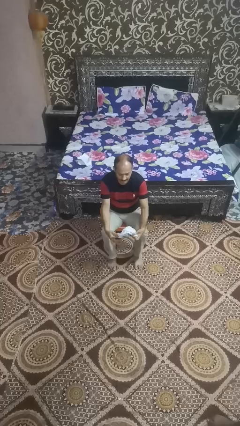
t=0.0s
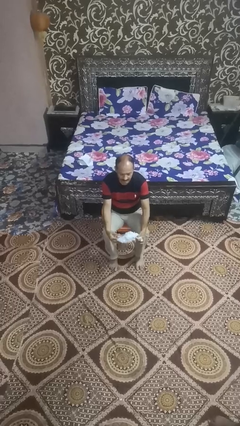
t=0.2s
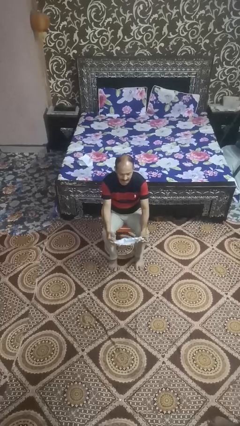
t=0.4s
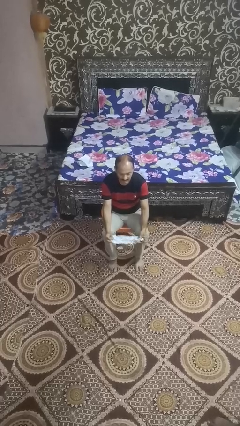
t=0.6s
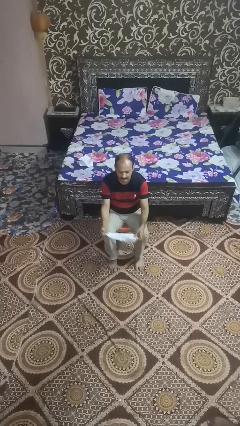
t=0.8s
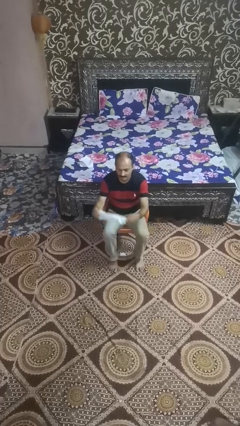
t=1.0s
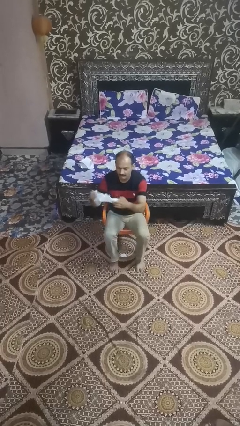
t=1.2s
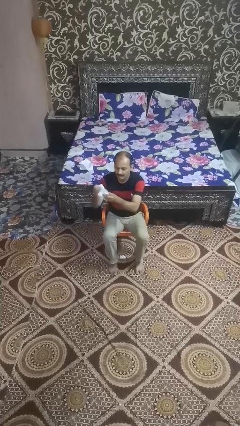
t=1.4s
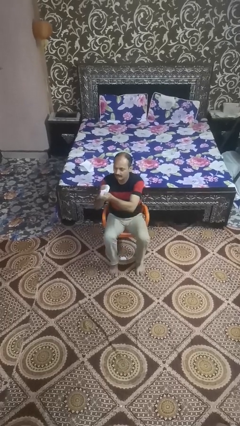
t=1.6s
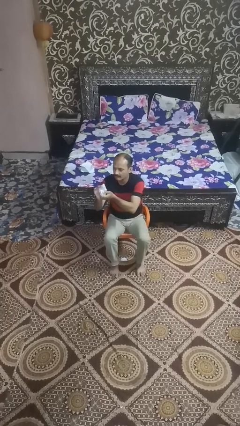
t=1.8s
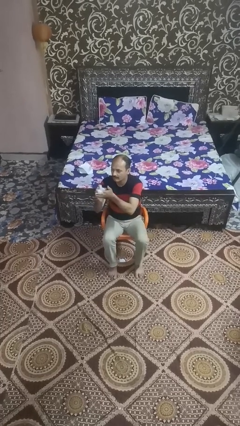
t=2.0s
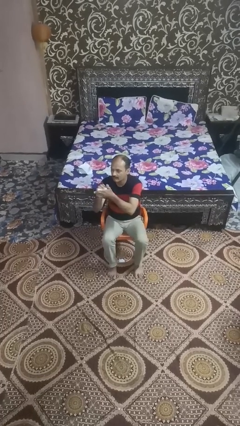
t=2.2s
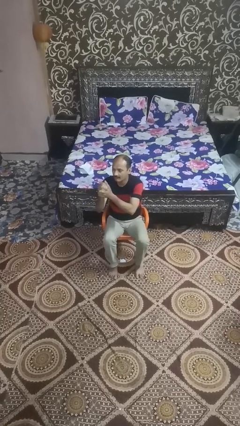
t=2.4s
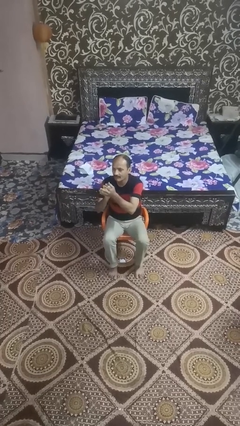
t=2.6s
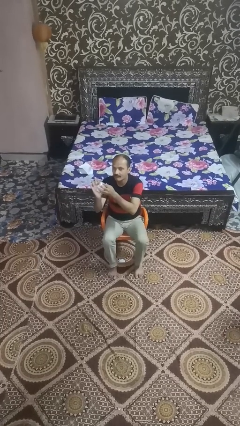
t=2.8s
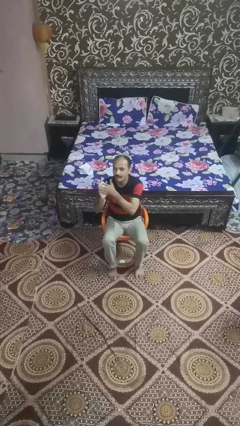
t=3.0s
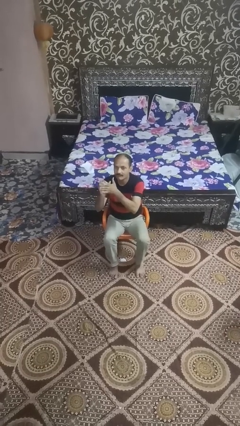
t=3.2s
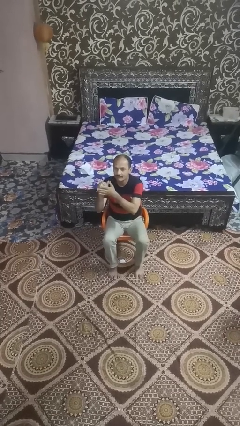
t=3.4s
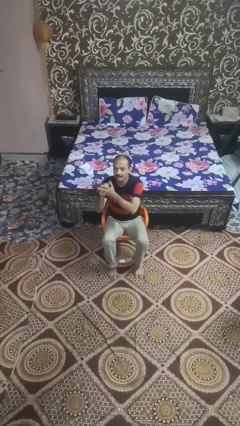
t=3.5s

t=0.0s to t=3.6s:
person crumples paper

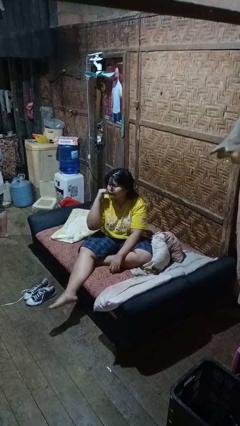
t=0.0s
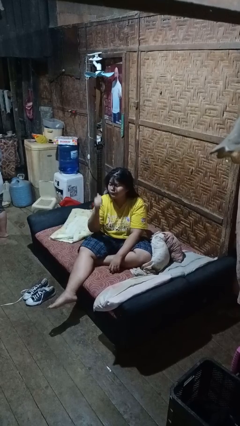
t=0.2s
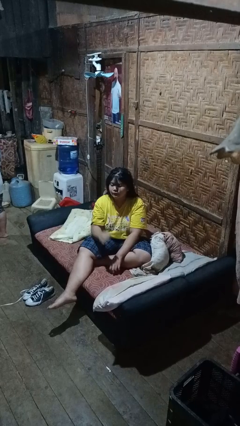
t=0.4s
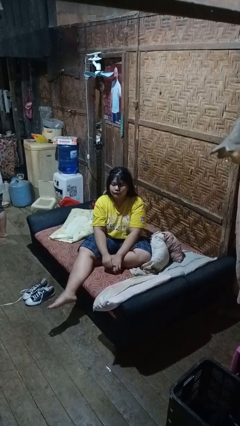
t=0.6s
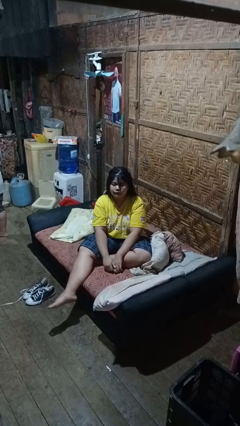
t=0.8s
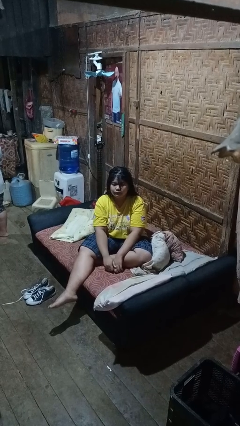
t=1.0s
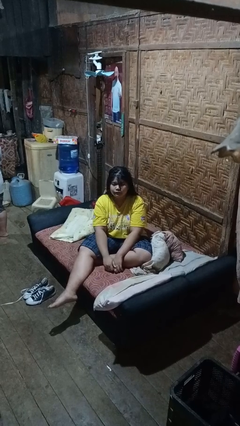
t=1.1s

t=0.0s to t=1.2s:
person gestures behind me

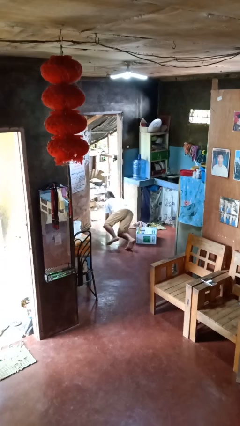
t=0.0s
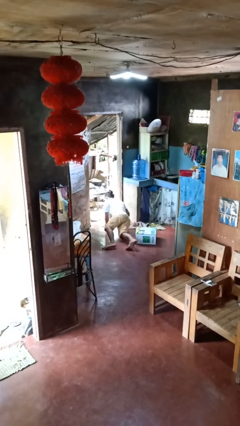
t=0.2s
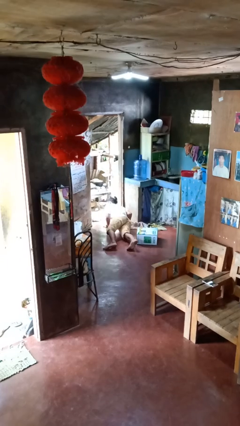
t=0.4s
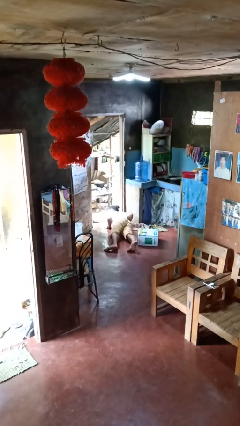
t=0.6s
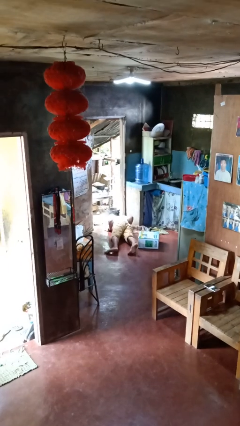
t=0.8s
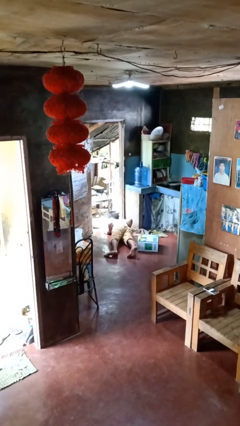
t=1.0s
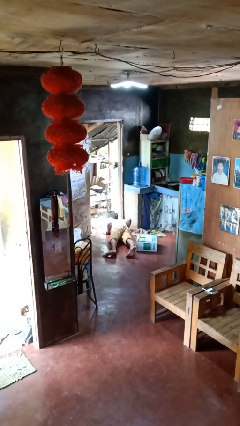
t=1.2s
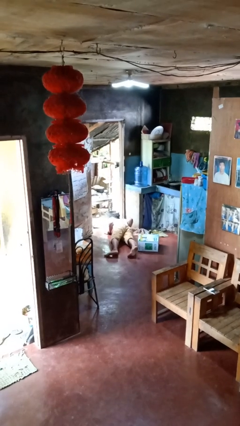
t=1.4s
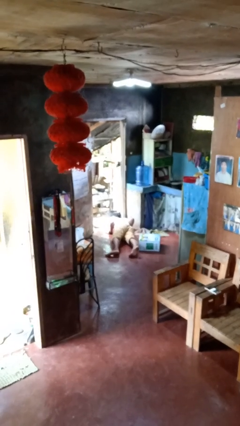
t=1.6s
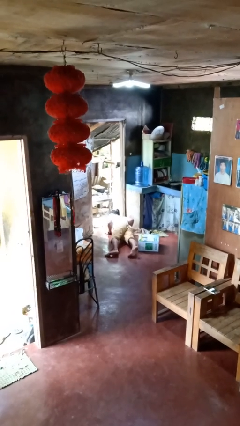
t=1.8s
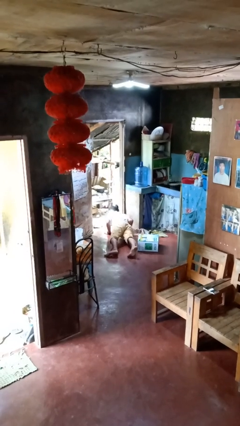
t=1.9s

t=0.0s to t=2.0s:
person lies down on floor

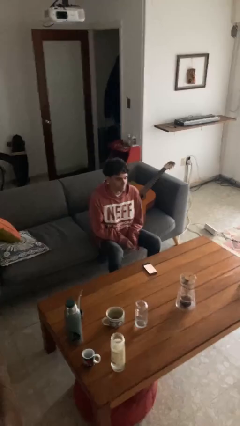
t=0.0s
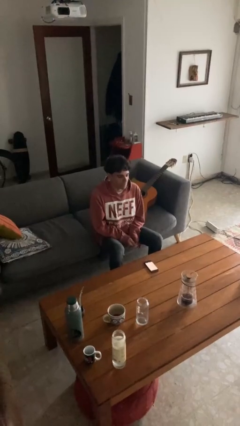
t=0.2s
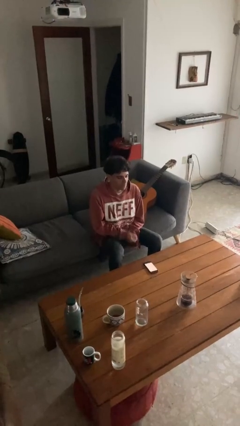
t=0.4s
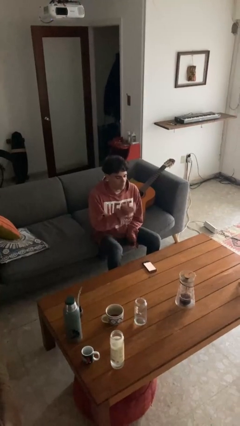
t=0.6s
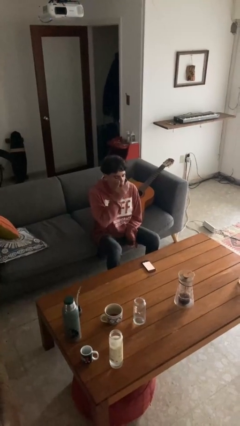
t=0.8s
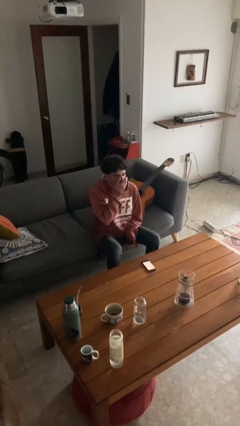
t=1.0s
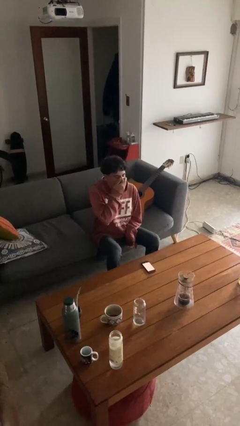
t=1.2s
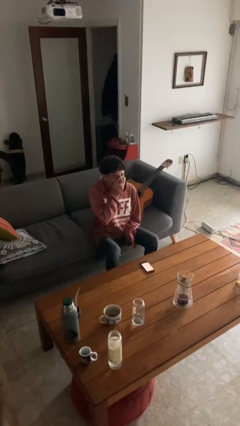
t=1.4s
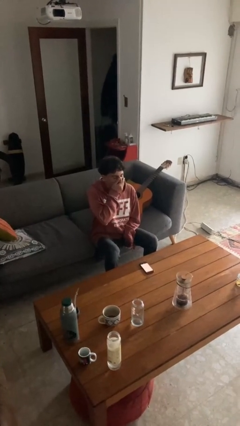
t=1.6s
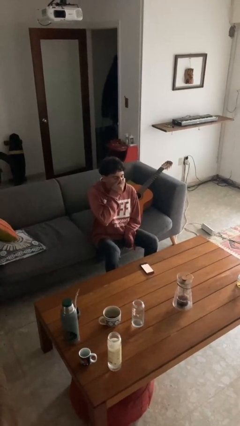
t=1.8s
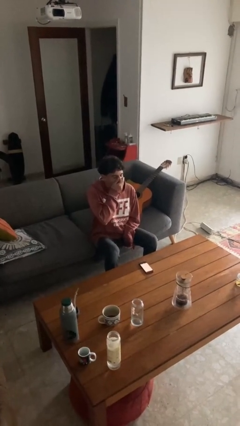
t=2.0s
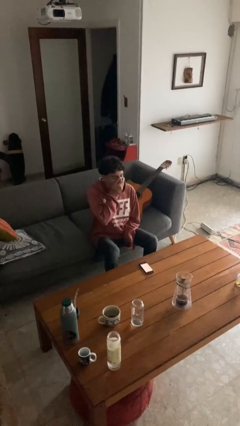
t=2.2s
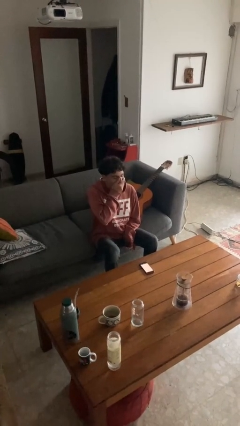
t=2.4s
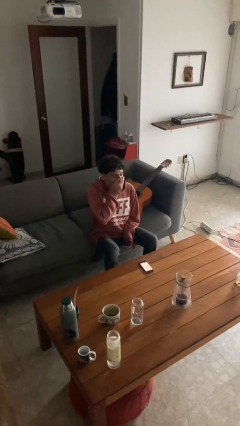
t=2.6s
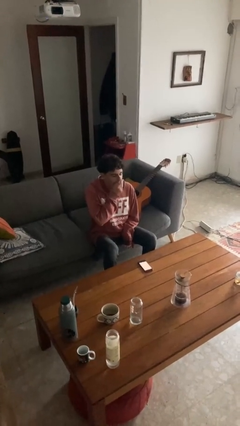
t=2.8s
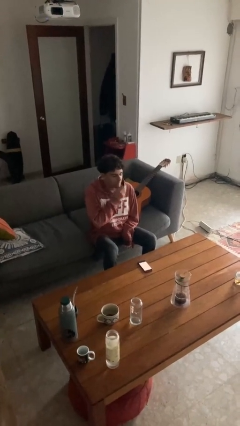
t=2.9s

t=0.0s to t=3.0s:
person yawns

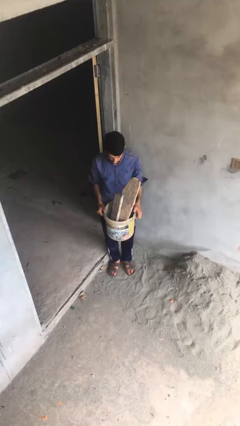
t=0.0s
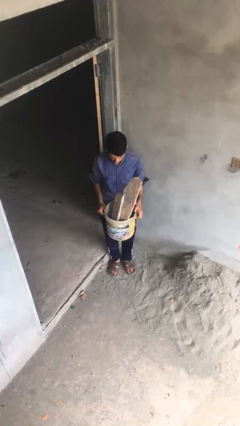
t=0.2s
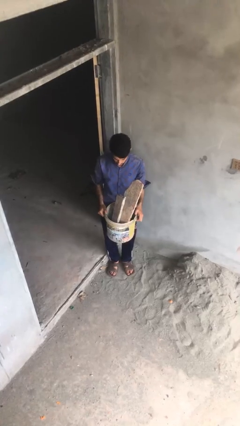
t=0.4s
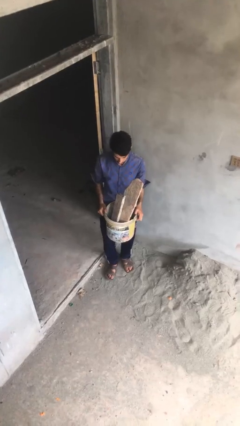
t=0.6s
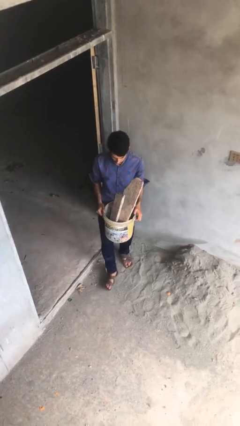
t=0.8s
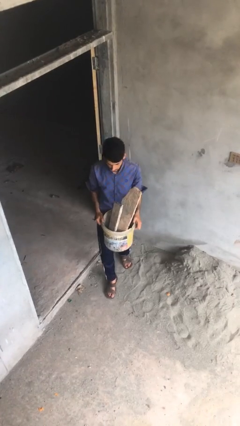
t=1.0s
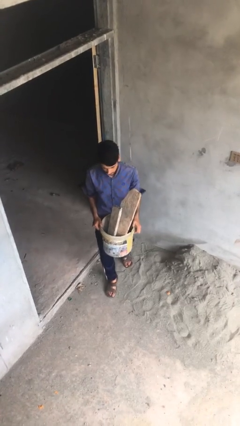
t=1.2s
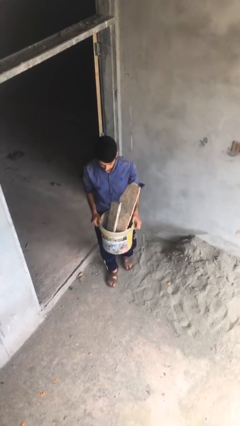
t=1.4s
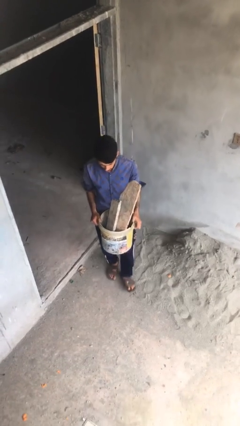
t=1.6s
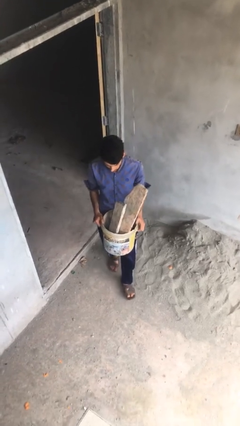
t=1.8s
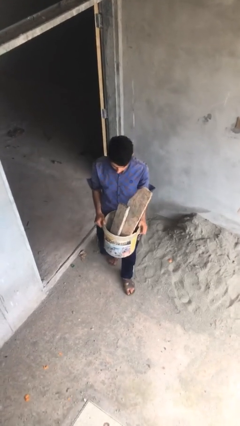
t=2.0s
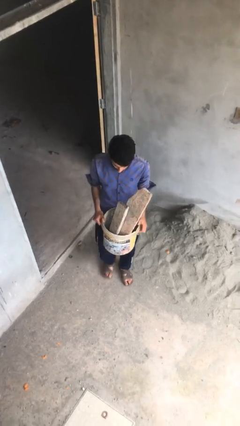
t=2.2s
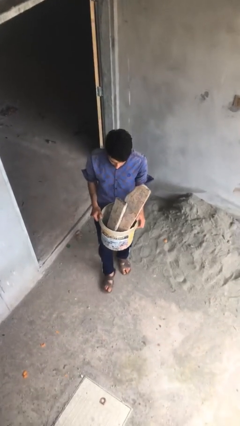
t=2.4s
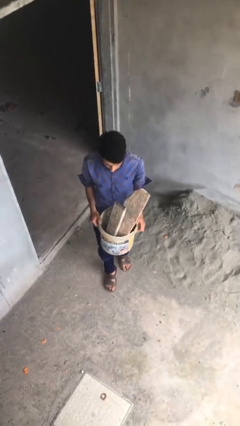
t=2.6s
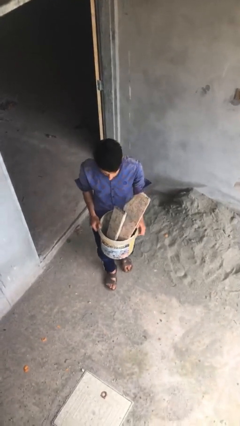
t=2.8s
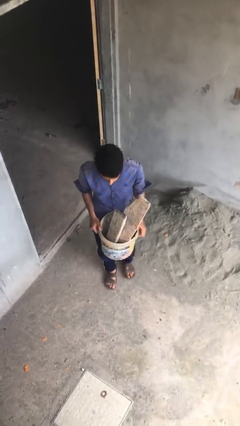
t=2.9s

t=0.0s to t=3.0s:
person carries heavy object

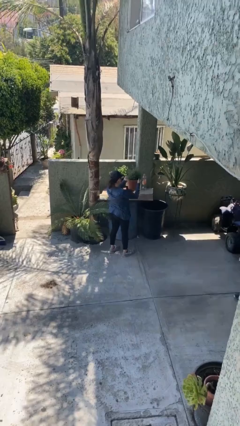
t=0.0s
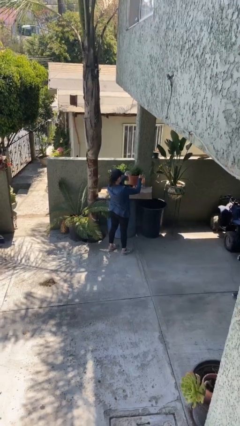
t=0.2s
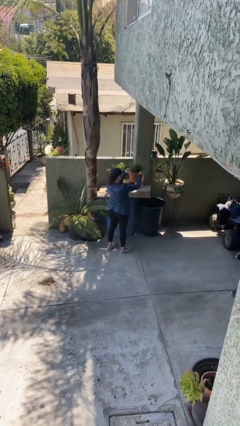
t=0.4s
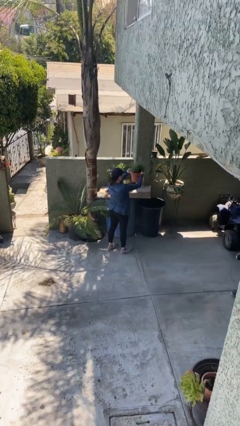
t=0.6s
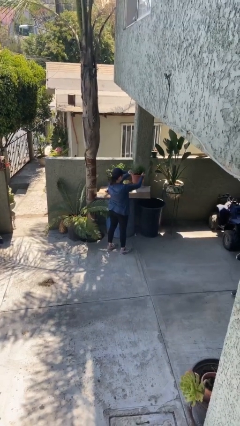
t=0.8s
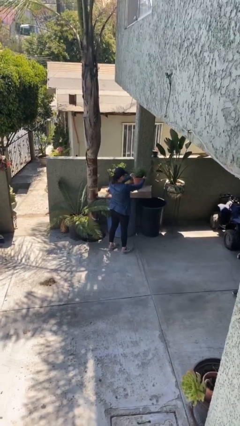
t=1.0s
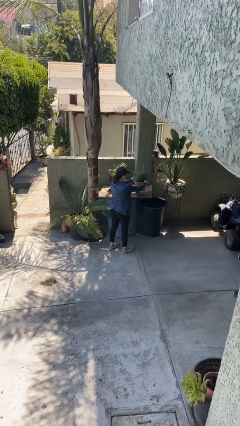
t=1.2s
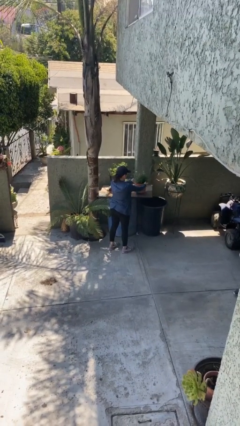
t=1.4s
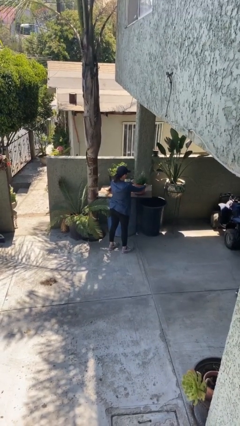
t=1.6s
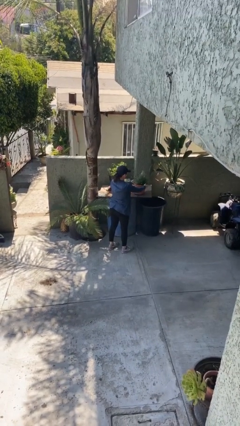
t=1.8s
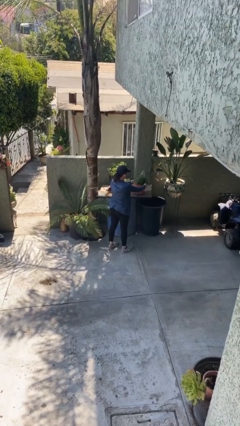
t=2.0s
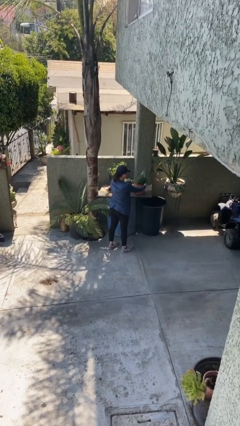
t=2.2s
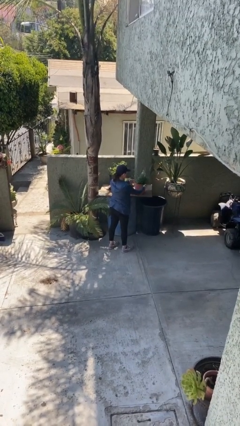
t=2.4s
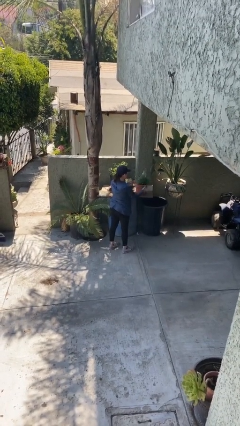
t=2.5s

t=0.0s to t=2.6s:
person puts down object on table

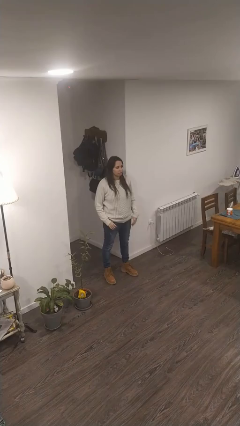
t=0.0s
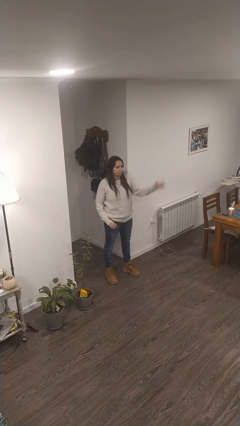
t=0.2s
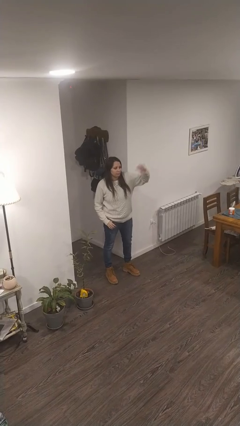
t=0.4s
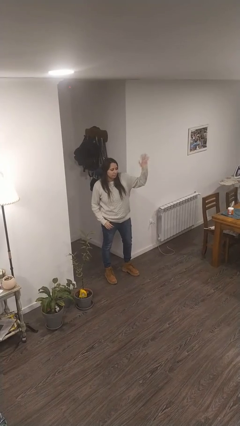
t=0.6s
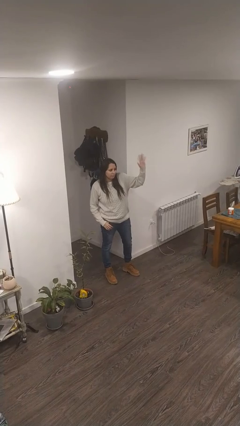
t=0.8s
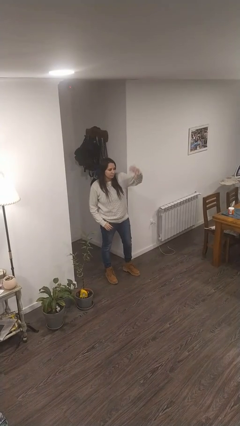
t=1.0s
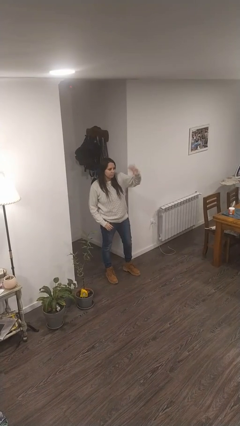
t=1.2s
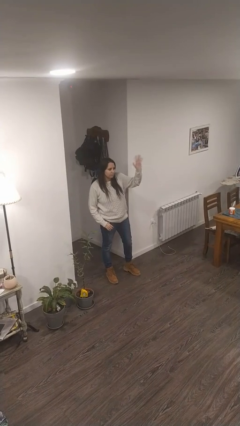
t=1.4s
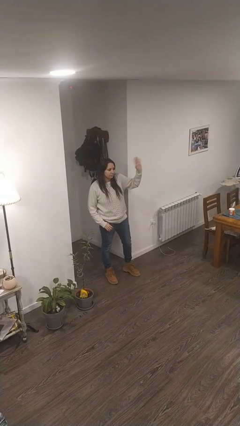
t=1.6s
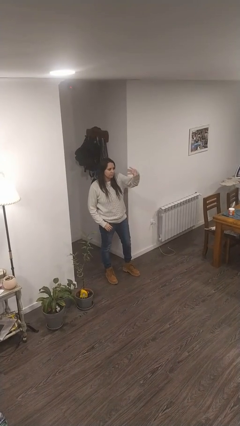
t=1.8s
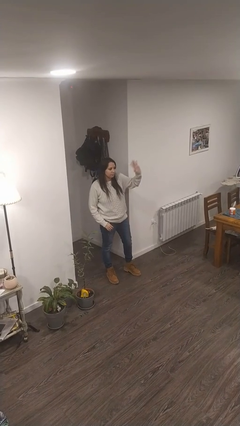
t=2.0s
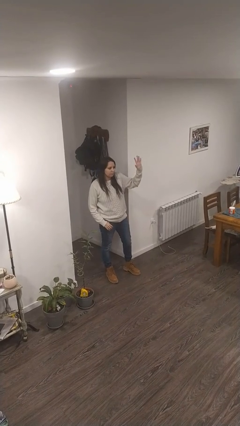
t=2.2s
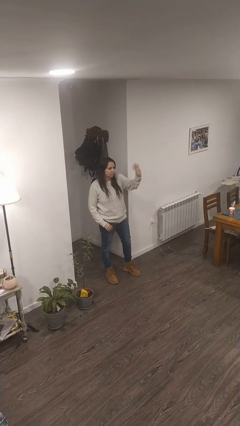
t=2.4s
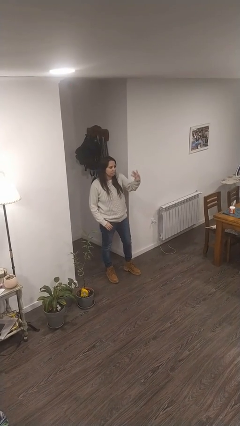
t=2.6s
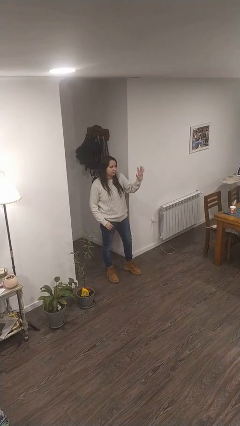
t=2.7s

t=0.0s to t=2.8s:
person waves at person
